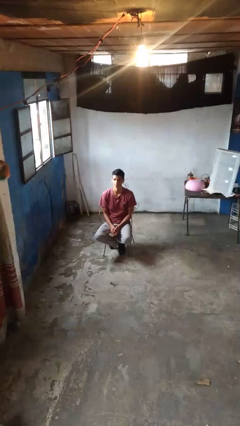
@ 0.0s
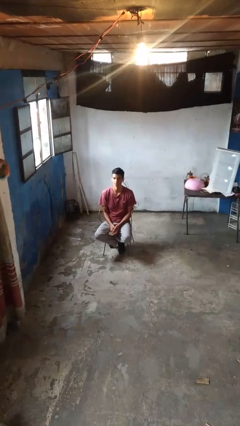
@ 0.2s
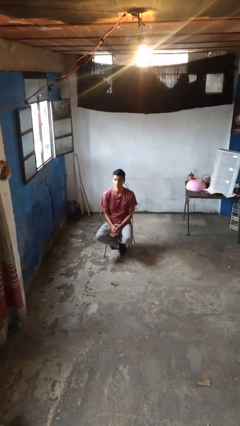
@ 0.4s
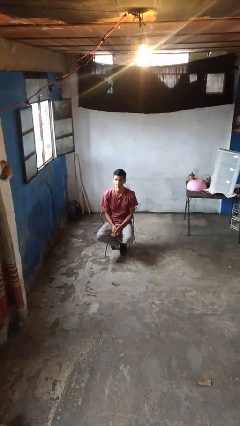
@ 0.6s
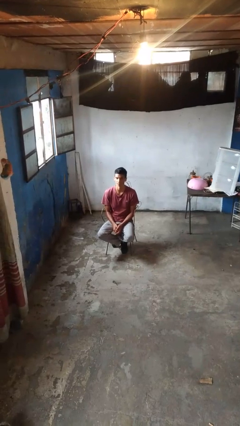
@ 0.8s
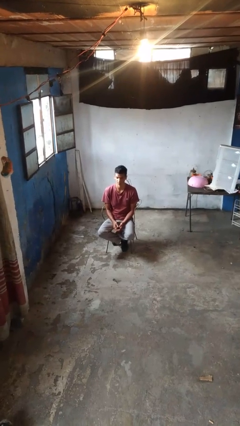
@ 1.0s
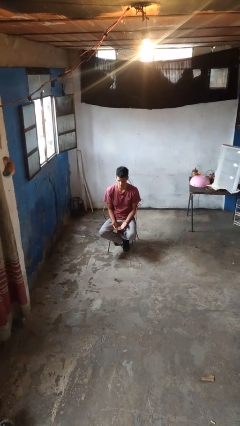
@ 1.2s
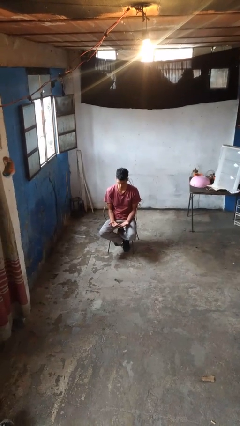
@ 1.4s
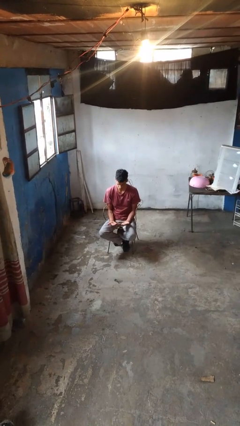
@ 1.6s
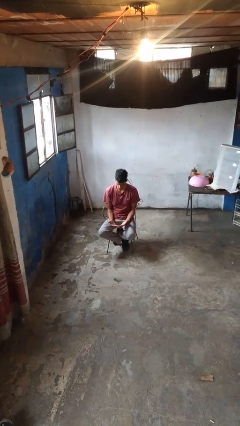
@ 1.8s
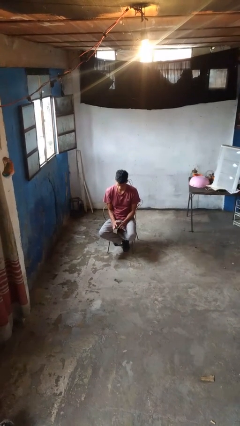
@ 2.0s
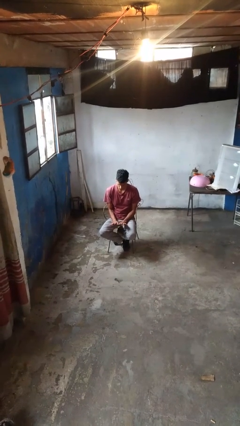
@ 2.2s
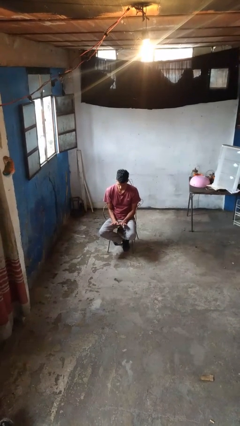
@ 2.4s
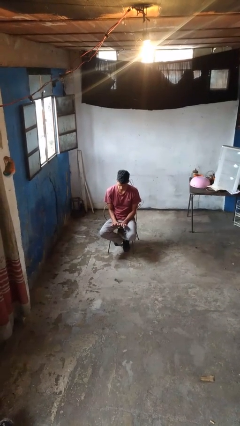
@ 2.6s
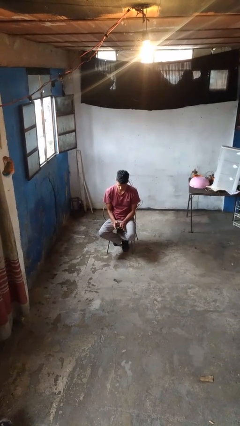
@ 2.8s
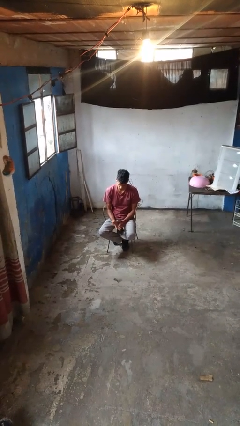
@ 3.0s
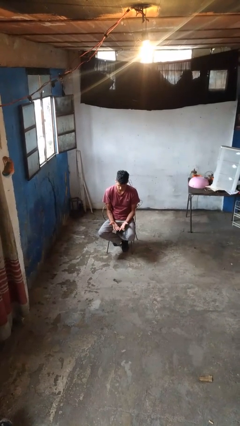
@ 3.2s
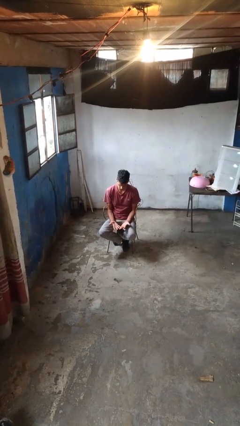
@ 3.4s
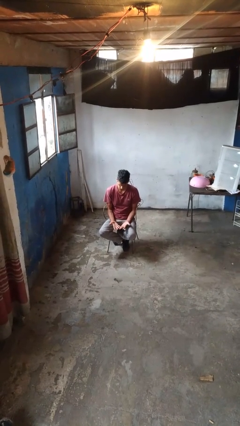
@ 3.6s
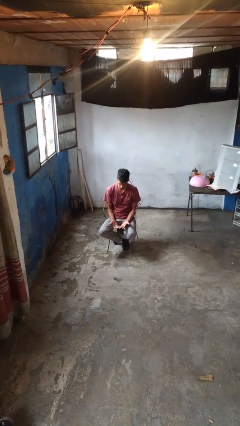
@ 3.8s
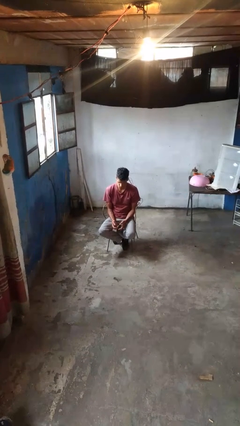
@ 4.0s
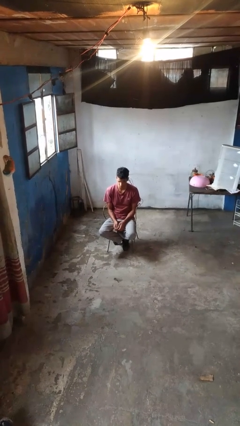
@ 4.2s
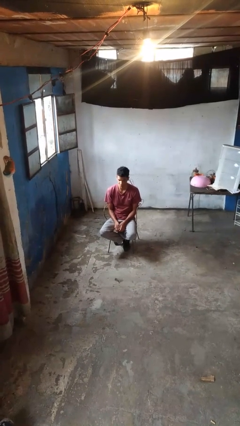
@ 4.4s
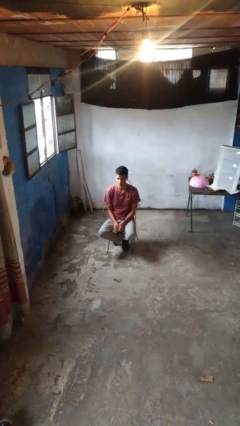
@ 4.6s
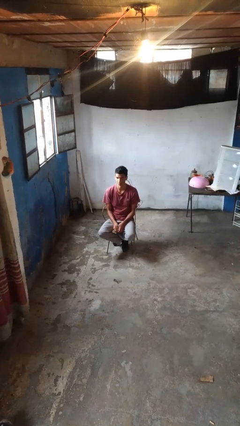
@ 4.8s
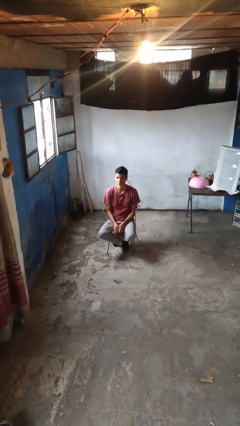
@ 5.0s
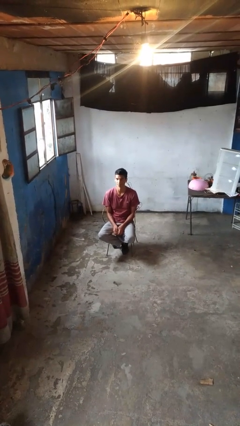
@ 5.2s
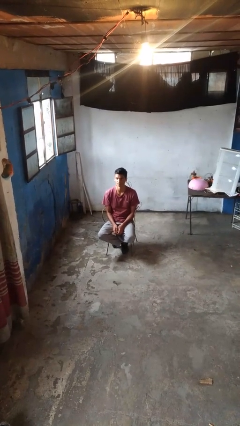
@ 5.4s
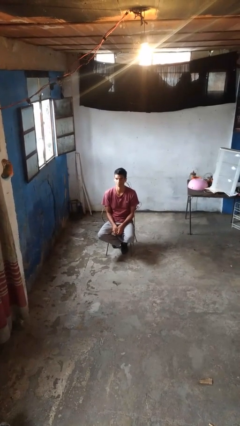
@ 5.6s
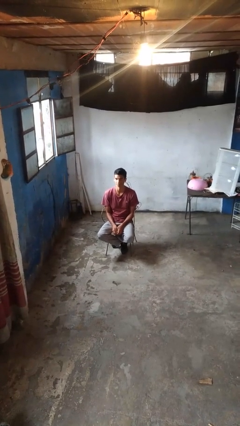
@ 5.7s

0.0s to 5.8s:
person looks at hands in lap

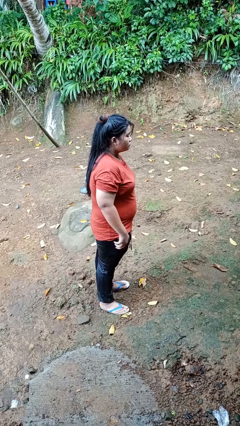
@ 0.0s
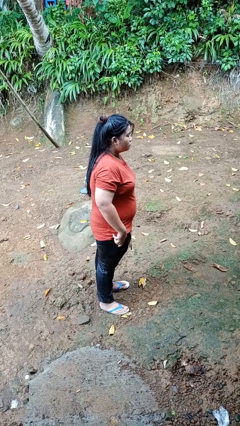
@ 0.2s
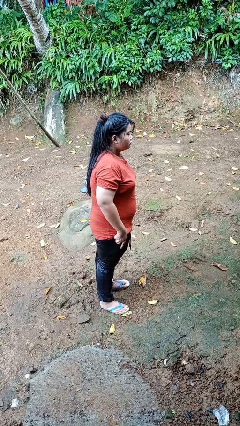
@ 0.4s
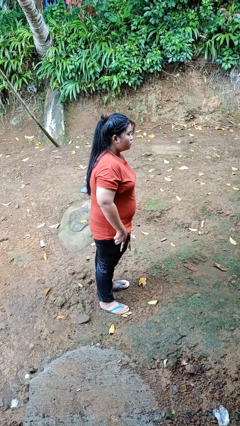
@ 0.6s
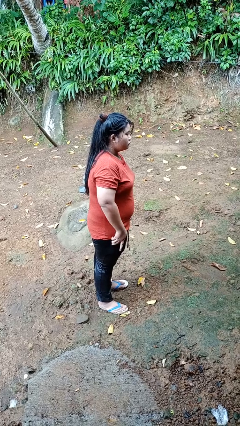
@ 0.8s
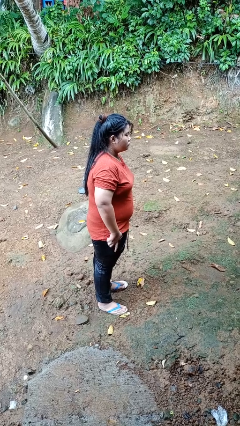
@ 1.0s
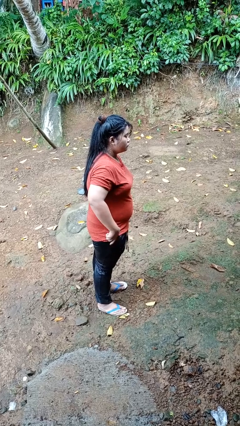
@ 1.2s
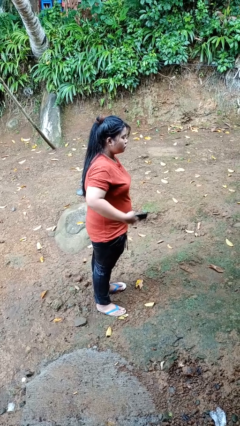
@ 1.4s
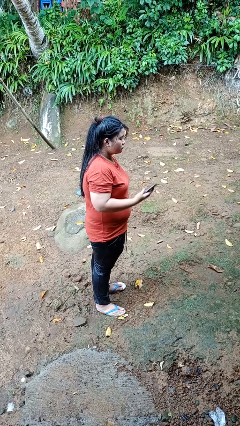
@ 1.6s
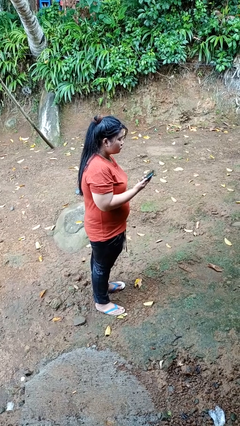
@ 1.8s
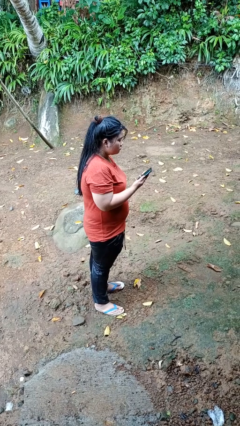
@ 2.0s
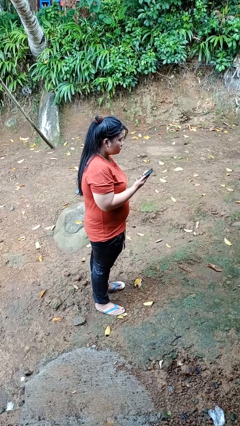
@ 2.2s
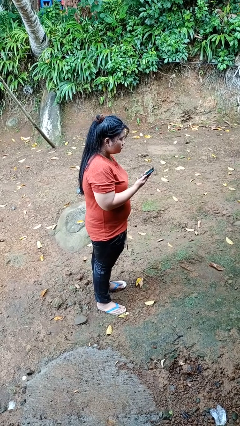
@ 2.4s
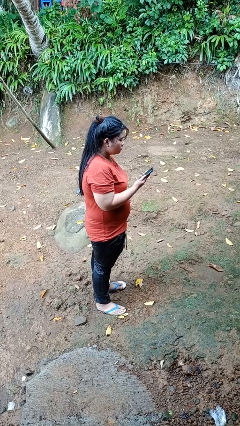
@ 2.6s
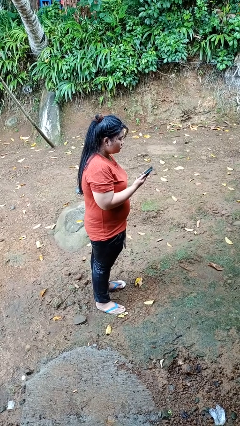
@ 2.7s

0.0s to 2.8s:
person takes phone from pocket

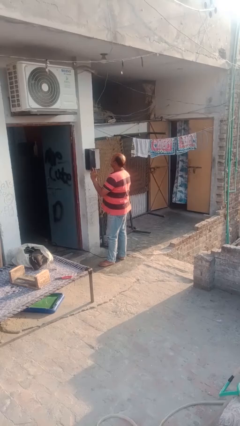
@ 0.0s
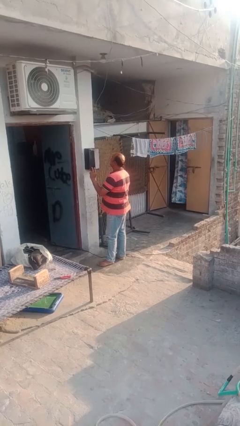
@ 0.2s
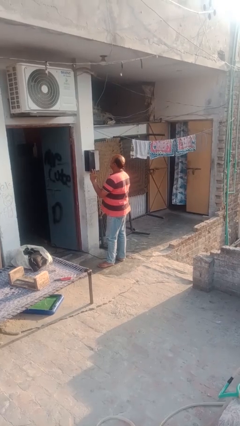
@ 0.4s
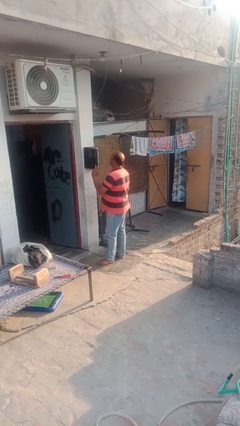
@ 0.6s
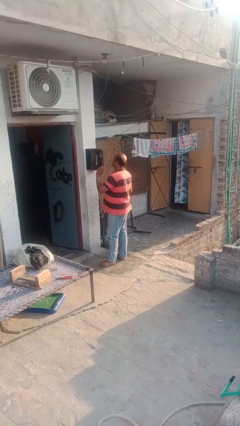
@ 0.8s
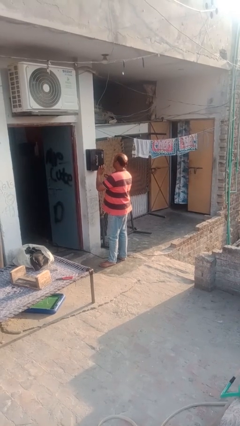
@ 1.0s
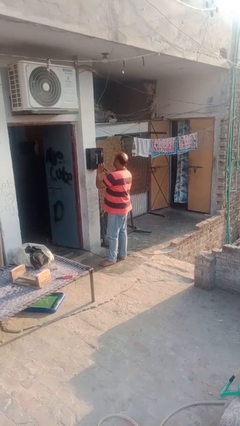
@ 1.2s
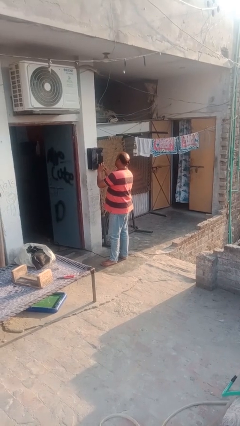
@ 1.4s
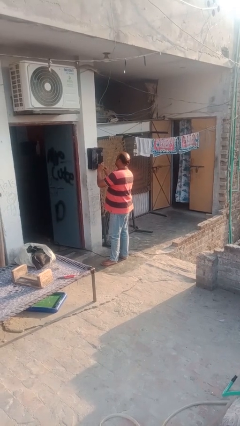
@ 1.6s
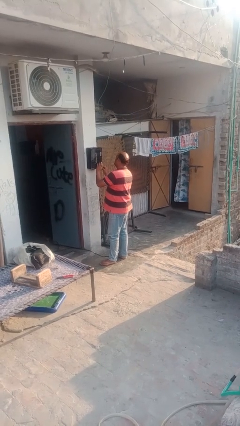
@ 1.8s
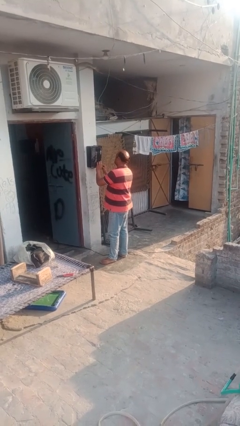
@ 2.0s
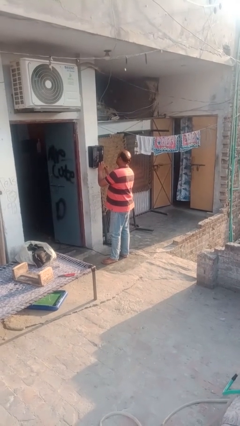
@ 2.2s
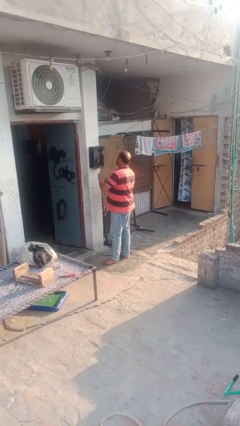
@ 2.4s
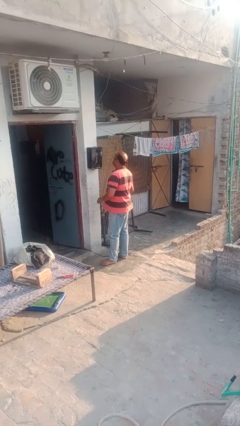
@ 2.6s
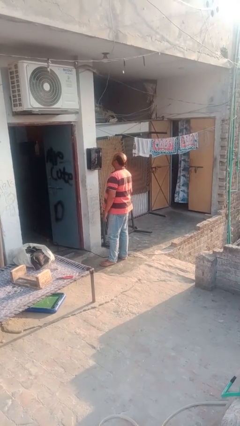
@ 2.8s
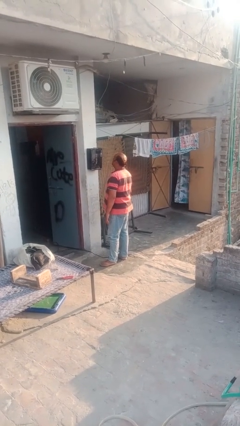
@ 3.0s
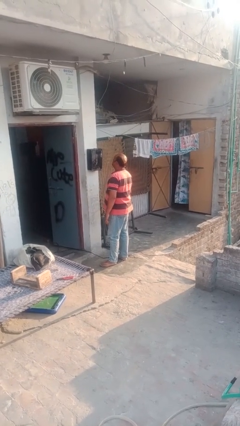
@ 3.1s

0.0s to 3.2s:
person closes mailbox

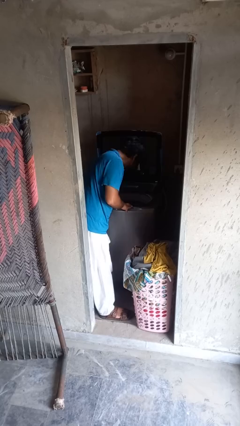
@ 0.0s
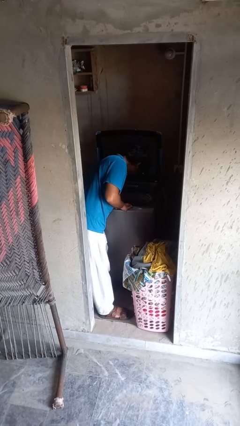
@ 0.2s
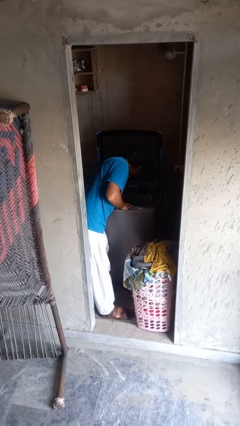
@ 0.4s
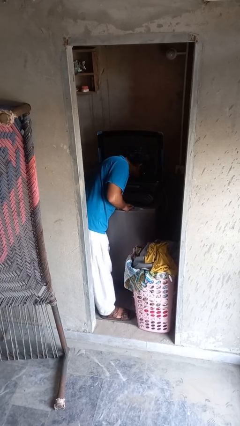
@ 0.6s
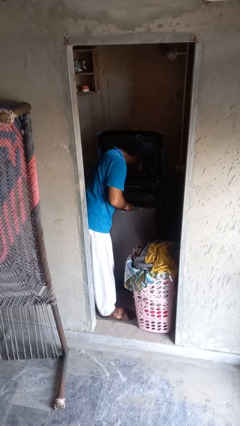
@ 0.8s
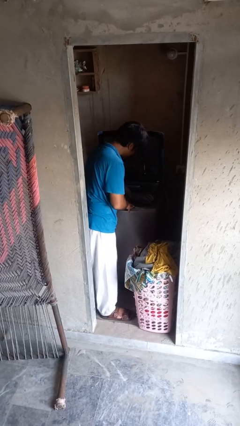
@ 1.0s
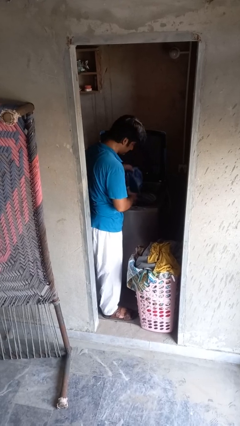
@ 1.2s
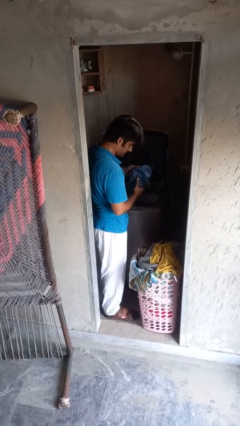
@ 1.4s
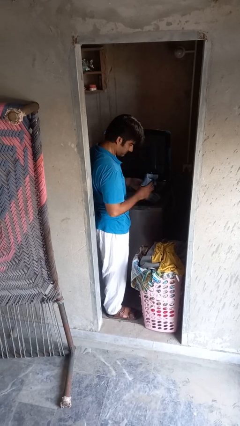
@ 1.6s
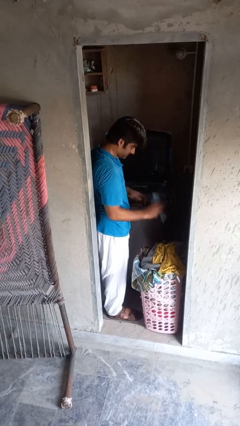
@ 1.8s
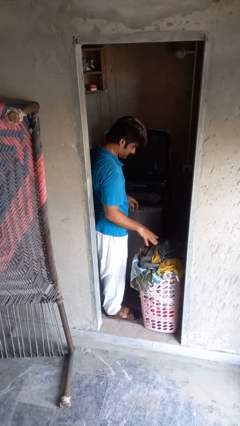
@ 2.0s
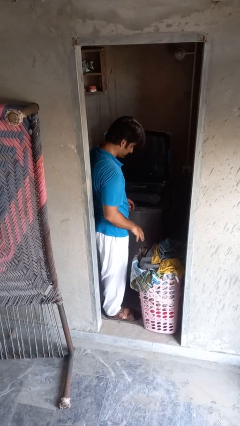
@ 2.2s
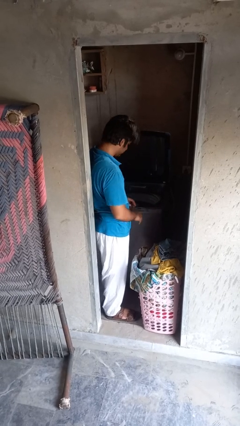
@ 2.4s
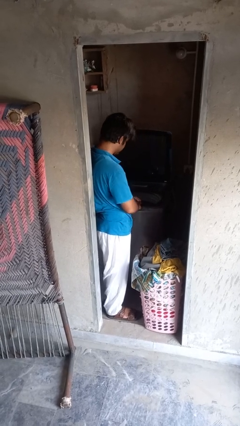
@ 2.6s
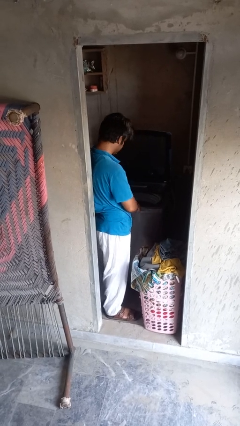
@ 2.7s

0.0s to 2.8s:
person loads clotheswasher

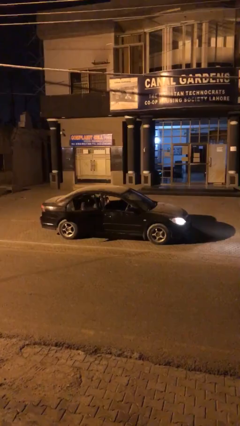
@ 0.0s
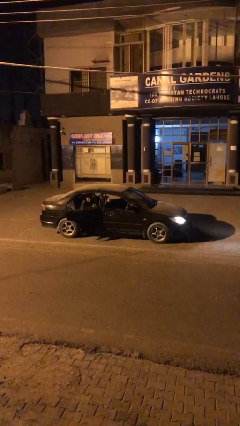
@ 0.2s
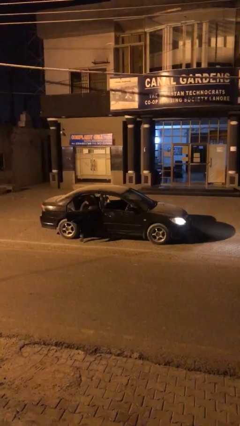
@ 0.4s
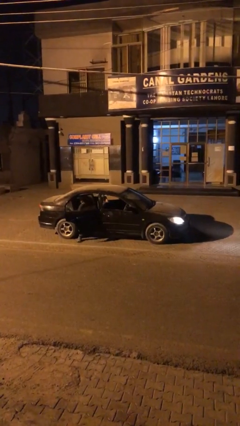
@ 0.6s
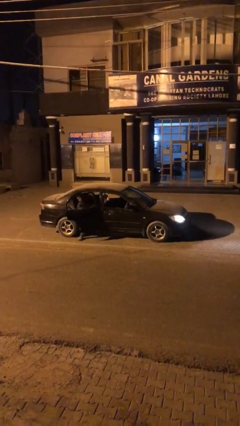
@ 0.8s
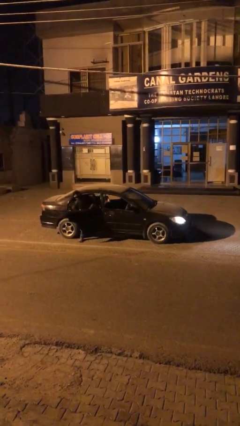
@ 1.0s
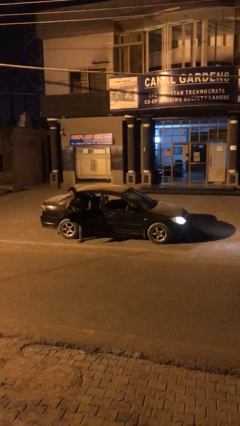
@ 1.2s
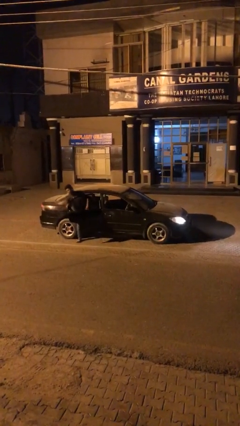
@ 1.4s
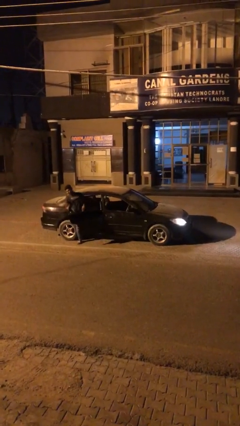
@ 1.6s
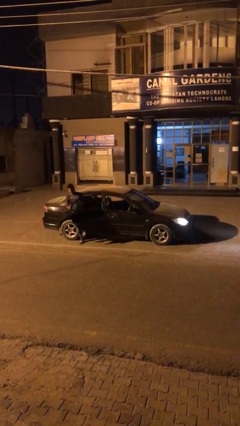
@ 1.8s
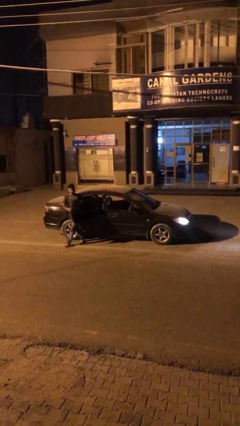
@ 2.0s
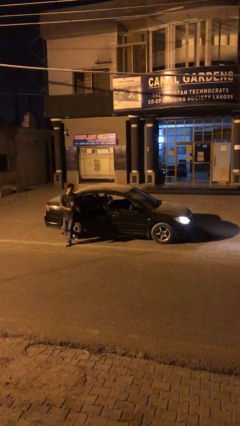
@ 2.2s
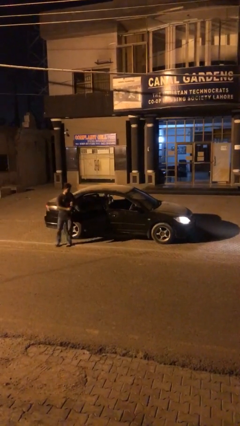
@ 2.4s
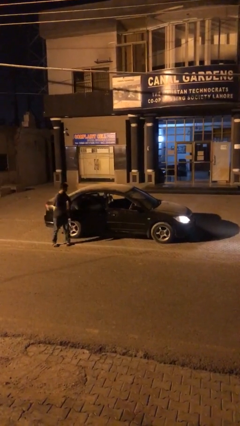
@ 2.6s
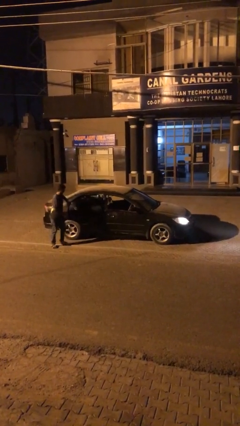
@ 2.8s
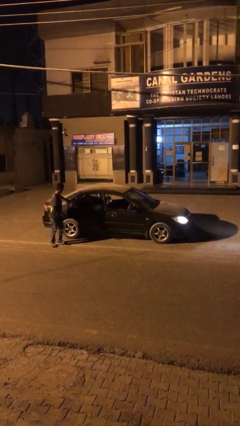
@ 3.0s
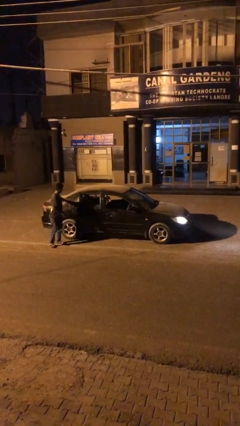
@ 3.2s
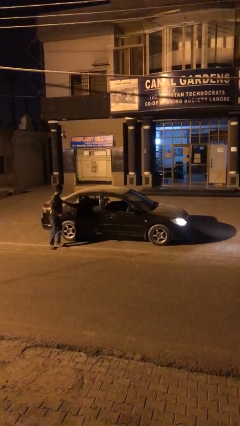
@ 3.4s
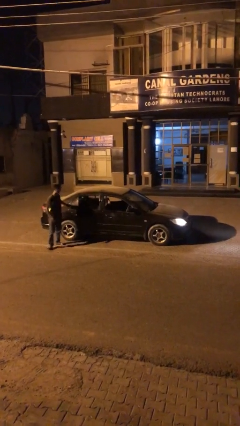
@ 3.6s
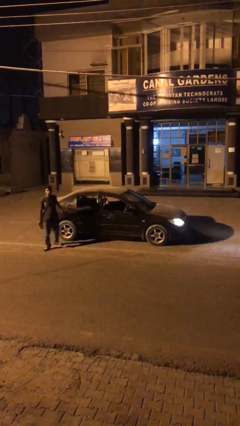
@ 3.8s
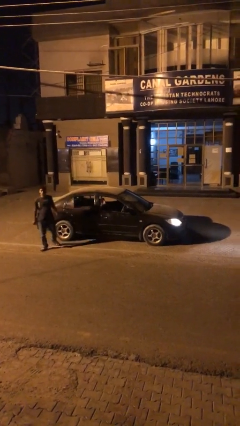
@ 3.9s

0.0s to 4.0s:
car drops off person
